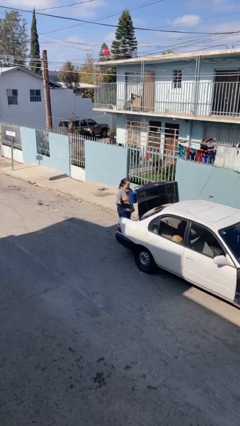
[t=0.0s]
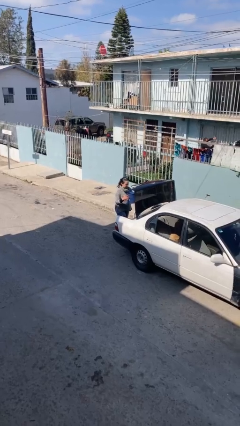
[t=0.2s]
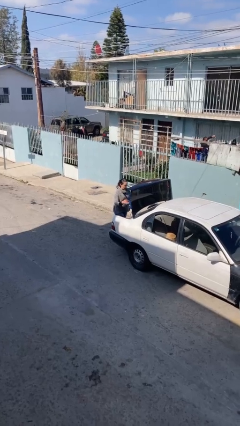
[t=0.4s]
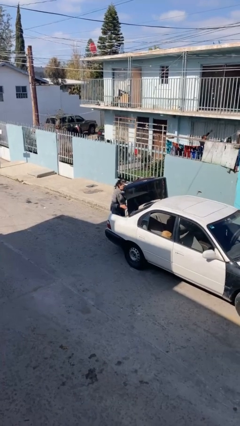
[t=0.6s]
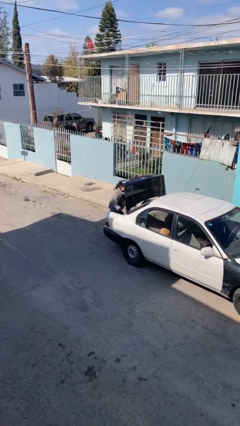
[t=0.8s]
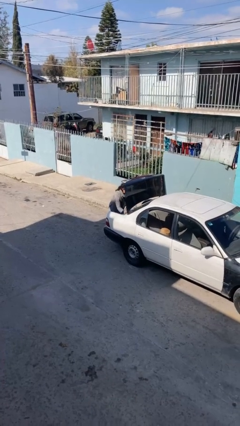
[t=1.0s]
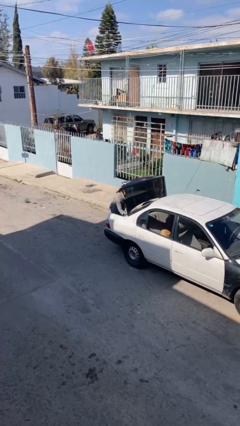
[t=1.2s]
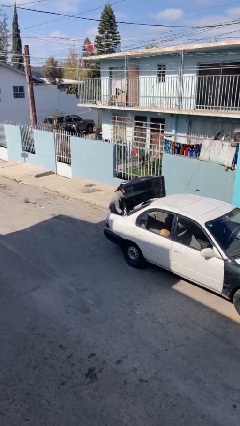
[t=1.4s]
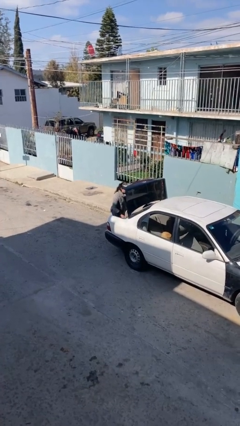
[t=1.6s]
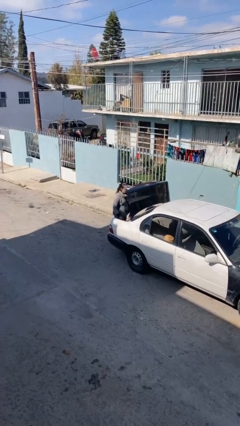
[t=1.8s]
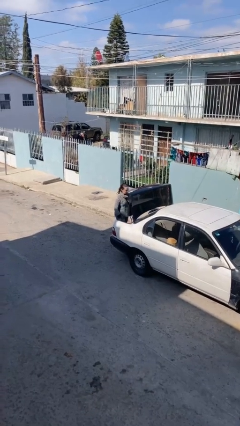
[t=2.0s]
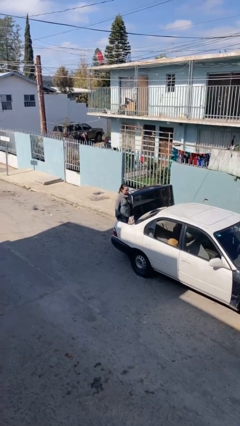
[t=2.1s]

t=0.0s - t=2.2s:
person loads car

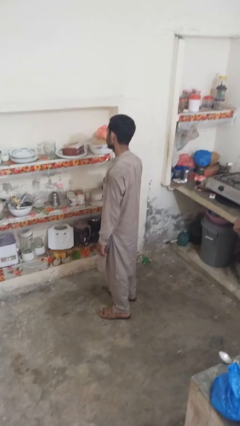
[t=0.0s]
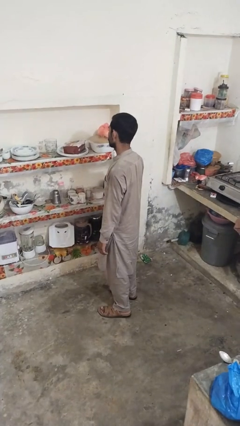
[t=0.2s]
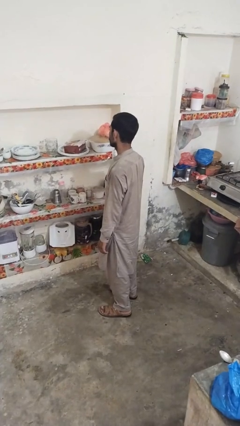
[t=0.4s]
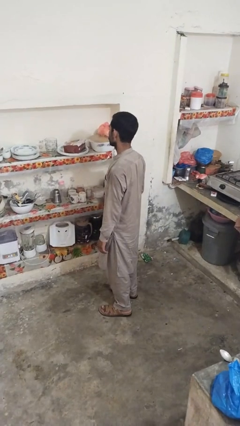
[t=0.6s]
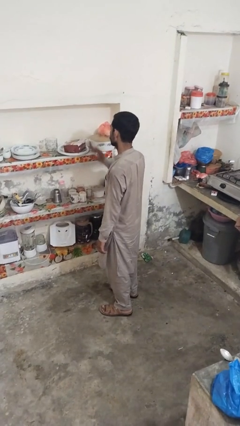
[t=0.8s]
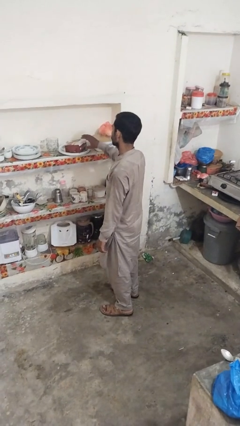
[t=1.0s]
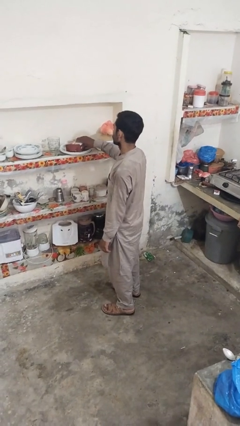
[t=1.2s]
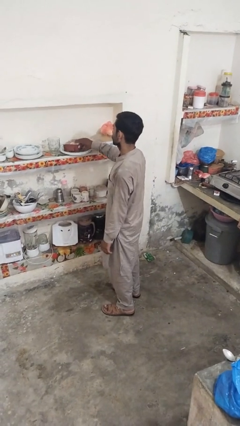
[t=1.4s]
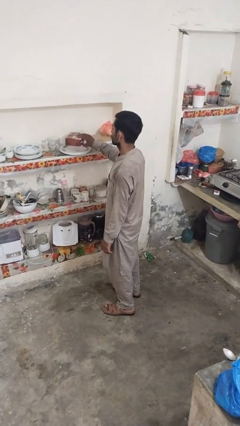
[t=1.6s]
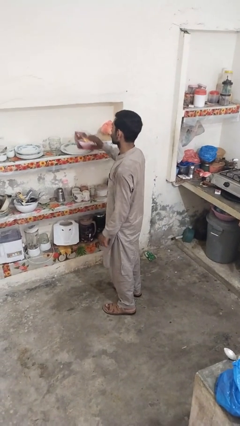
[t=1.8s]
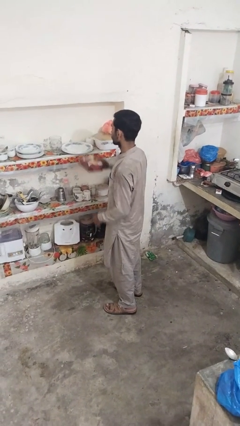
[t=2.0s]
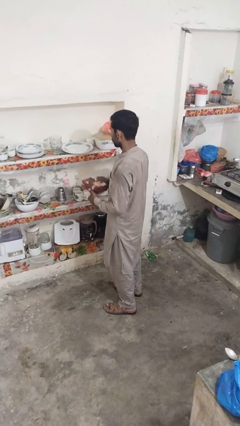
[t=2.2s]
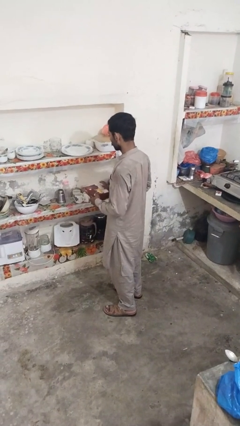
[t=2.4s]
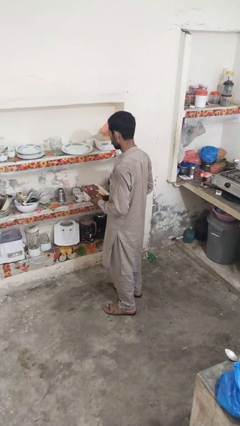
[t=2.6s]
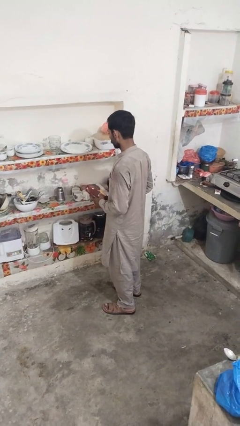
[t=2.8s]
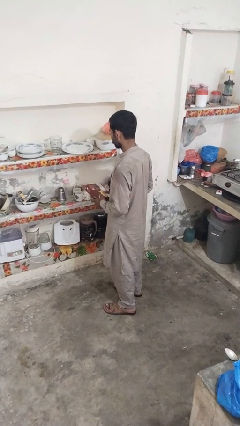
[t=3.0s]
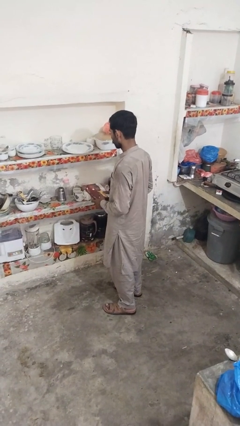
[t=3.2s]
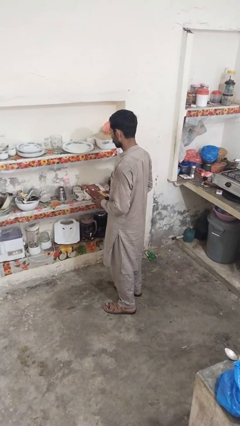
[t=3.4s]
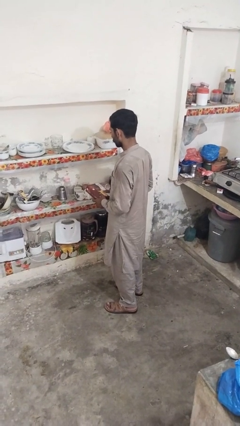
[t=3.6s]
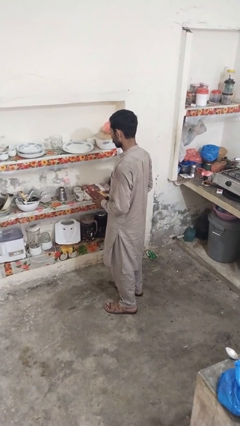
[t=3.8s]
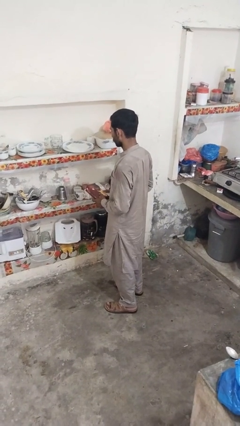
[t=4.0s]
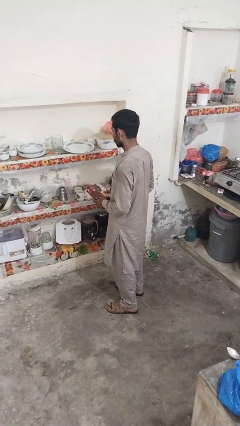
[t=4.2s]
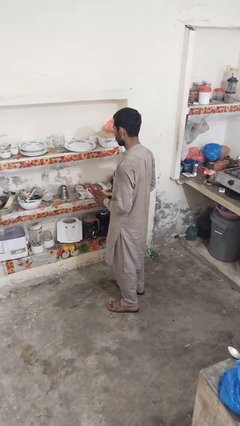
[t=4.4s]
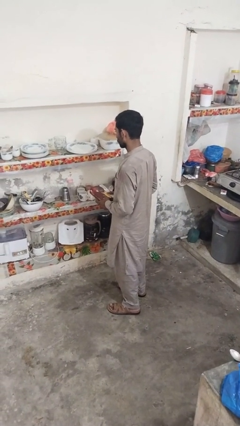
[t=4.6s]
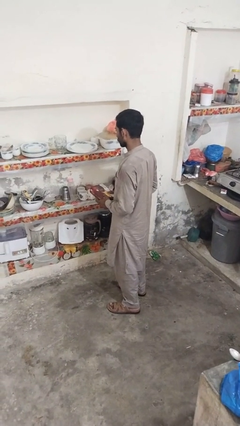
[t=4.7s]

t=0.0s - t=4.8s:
person picks up object from cabinet

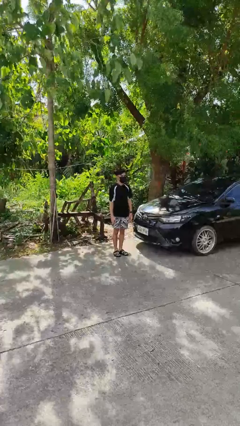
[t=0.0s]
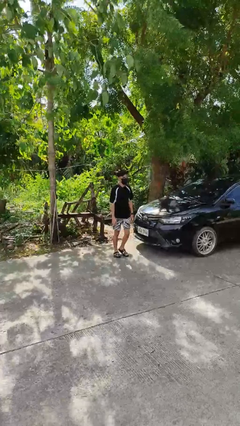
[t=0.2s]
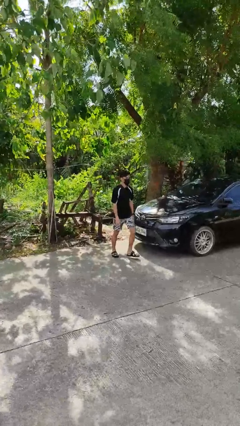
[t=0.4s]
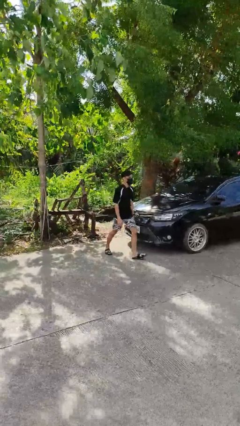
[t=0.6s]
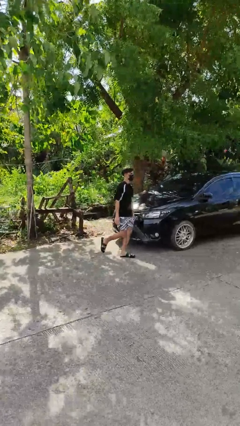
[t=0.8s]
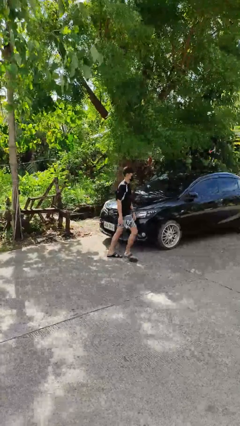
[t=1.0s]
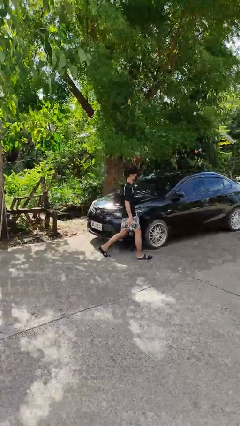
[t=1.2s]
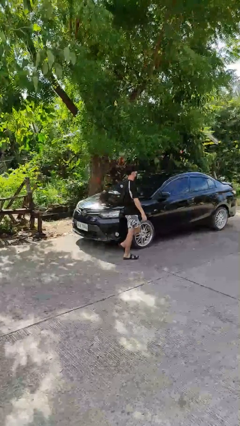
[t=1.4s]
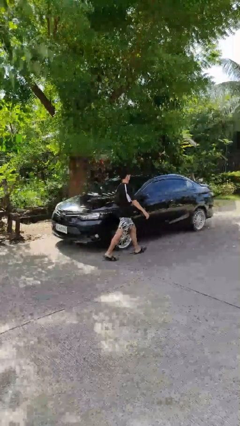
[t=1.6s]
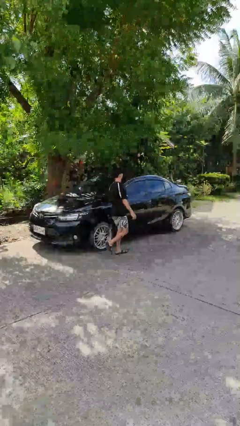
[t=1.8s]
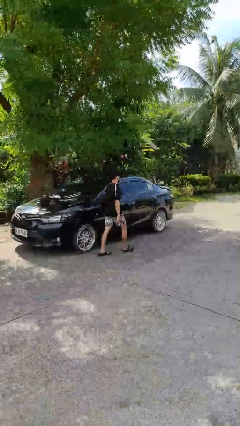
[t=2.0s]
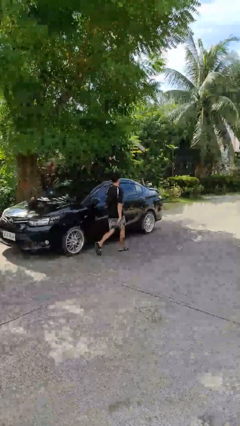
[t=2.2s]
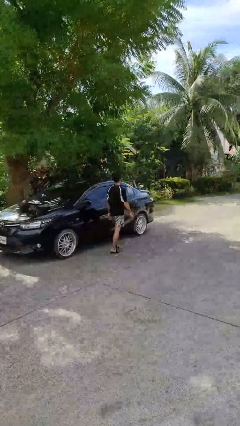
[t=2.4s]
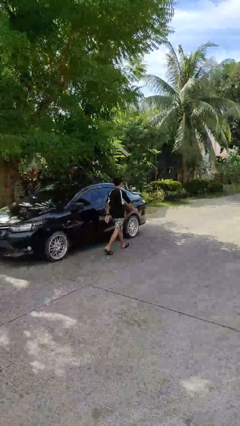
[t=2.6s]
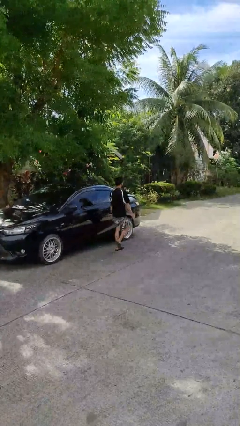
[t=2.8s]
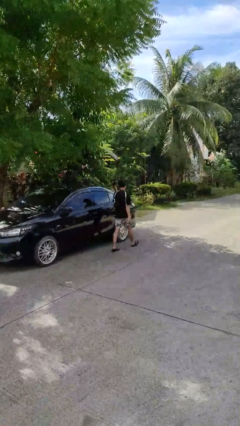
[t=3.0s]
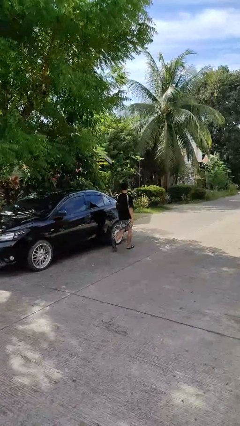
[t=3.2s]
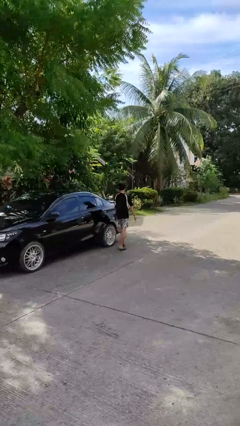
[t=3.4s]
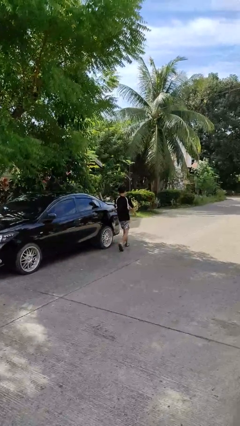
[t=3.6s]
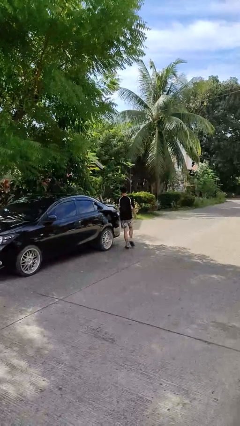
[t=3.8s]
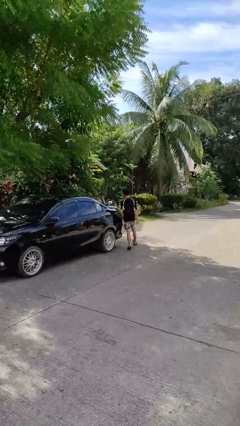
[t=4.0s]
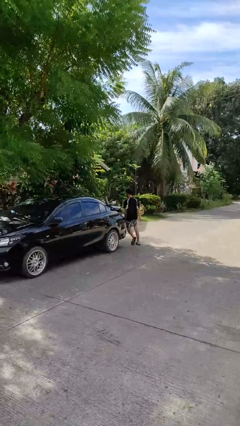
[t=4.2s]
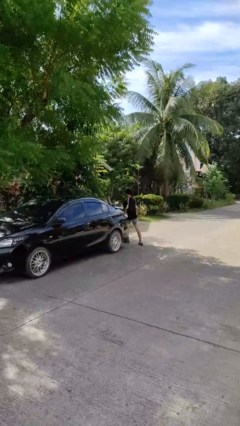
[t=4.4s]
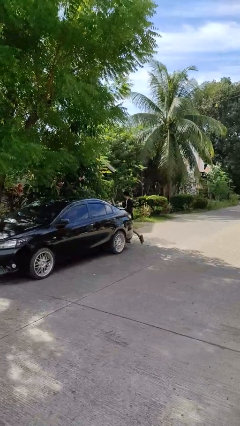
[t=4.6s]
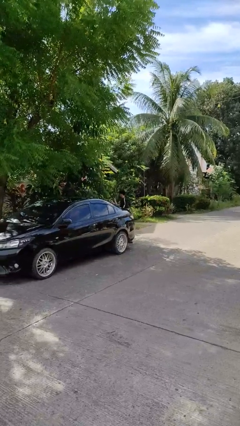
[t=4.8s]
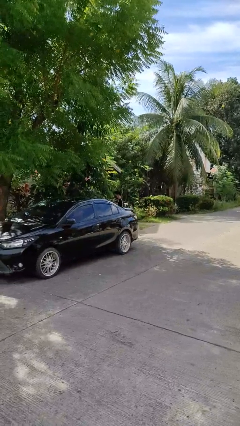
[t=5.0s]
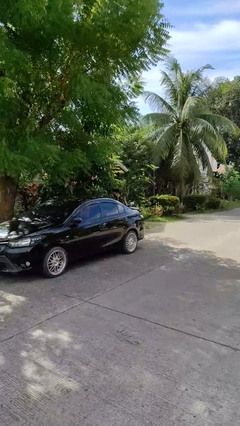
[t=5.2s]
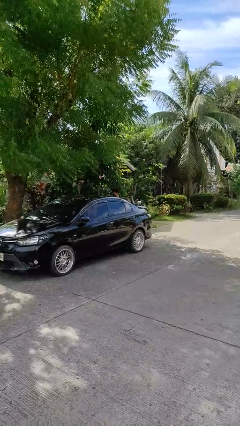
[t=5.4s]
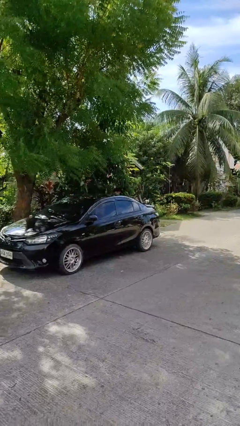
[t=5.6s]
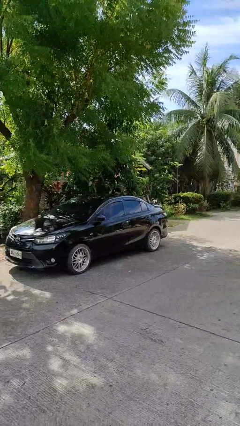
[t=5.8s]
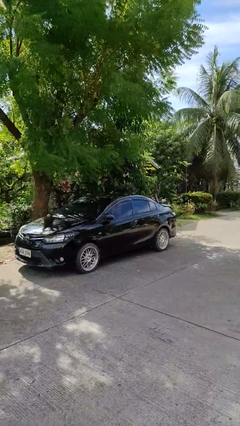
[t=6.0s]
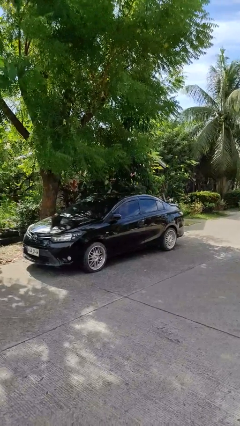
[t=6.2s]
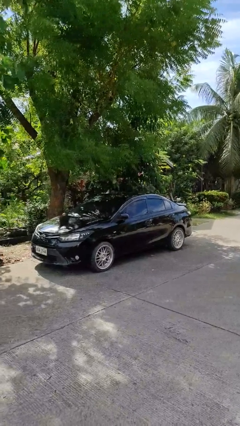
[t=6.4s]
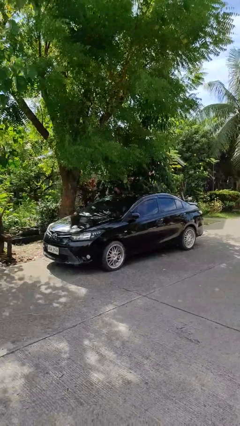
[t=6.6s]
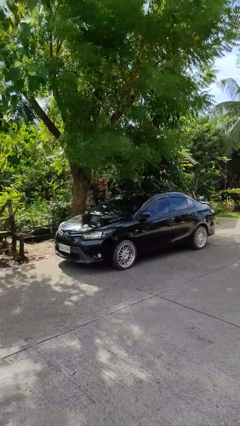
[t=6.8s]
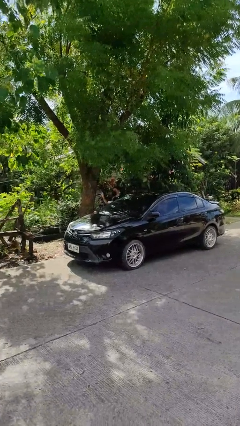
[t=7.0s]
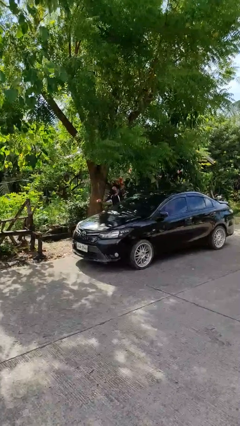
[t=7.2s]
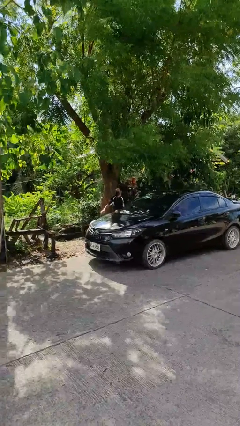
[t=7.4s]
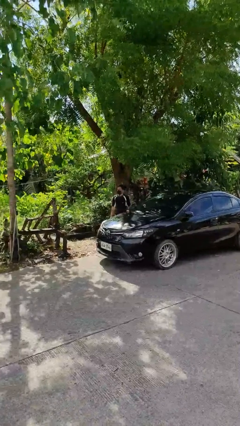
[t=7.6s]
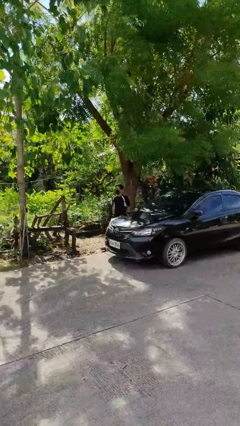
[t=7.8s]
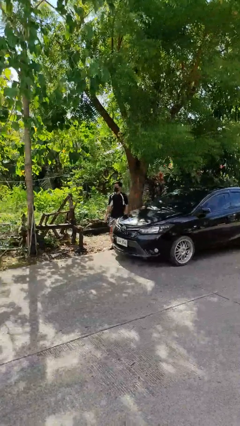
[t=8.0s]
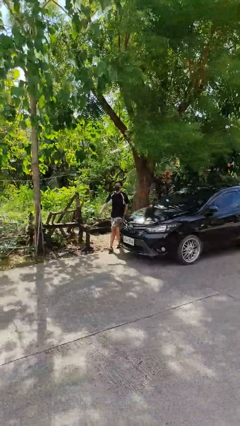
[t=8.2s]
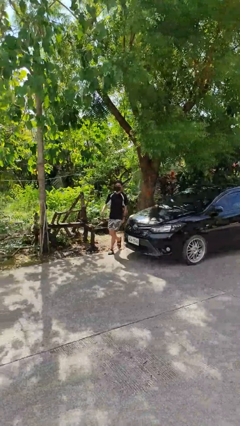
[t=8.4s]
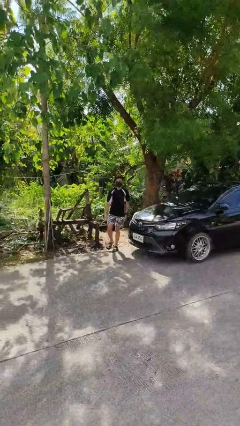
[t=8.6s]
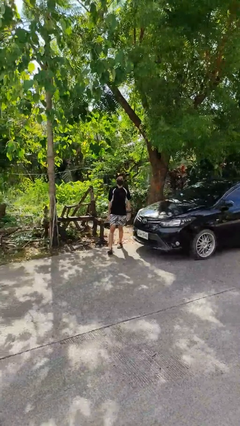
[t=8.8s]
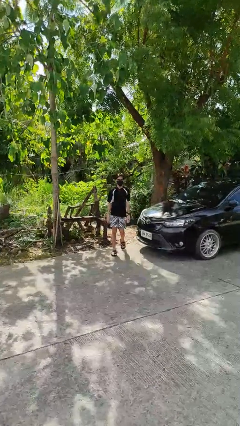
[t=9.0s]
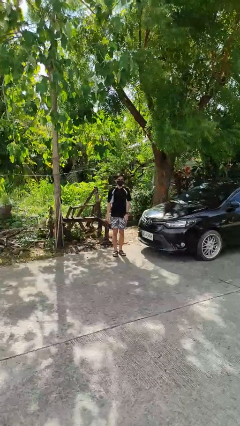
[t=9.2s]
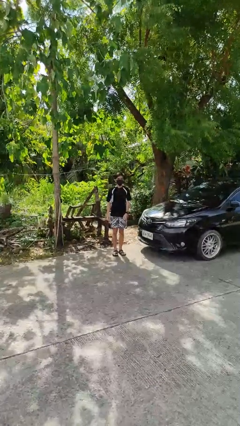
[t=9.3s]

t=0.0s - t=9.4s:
person walks around car

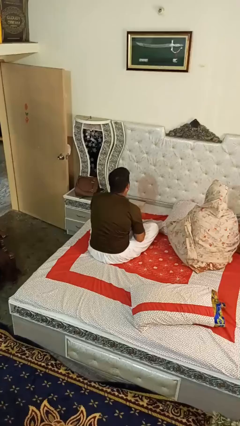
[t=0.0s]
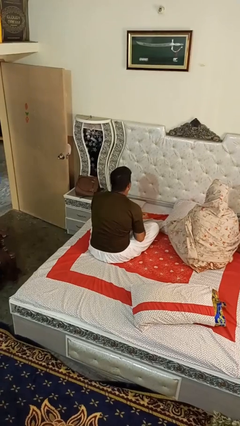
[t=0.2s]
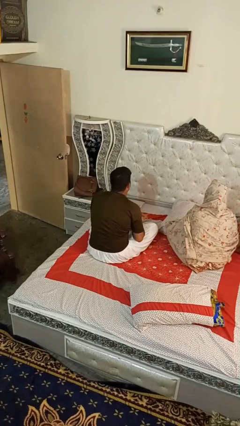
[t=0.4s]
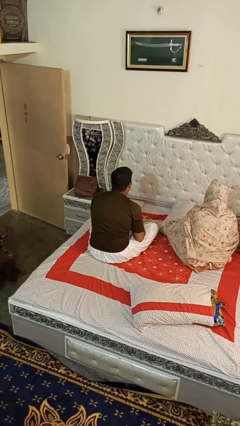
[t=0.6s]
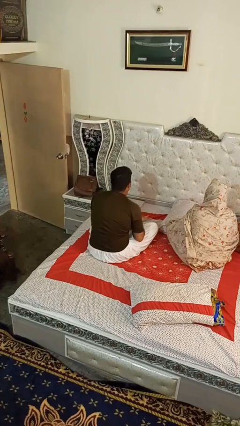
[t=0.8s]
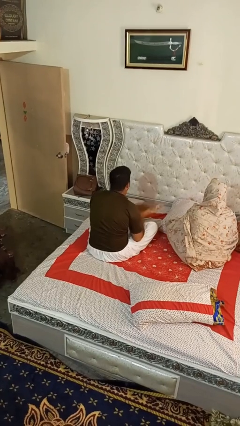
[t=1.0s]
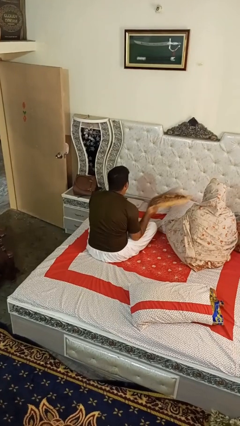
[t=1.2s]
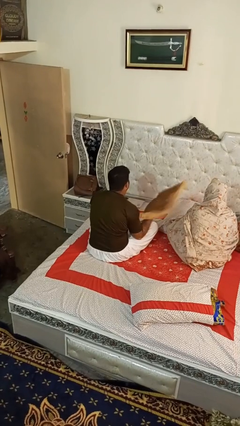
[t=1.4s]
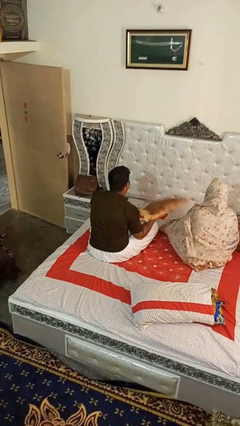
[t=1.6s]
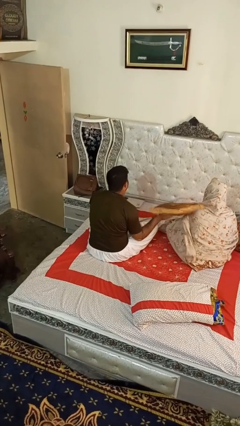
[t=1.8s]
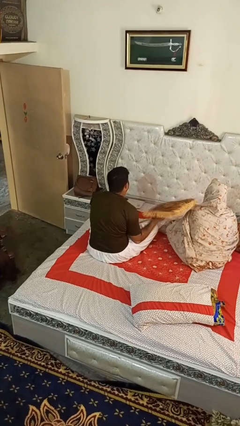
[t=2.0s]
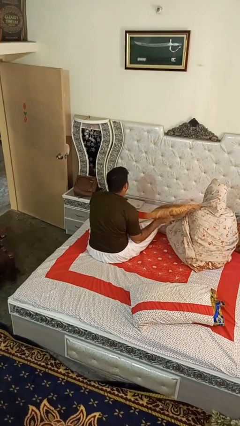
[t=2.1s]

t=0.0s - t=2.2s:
person hits person with pillow
